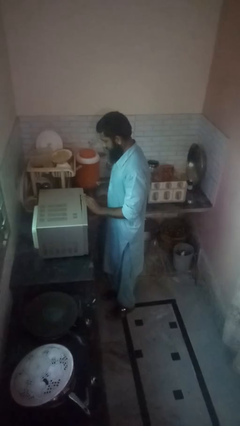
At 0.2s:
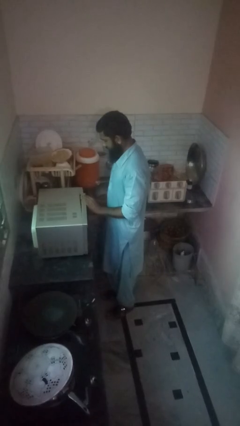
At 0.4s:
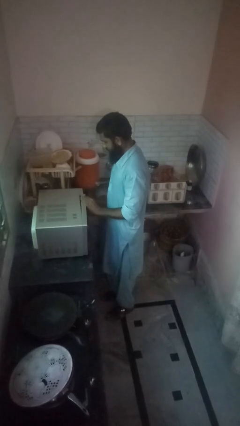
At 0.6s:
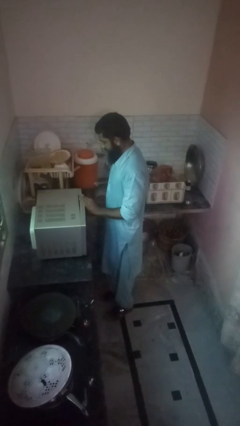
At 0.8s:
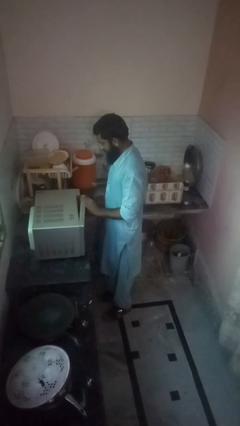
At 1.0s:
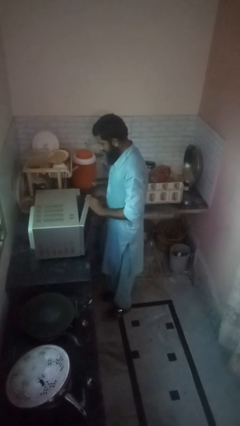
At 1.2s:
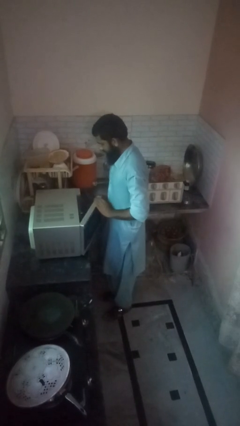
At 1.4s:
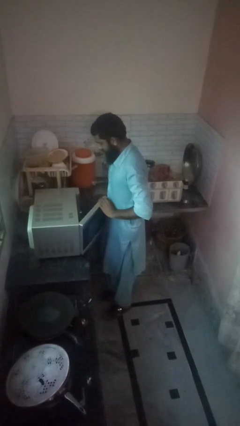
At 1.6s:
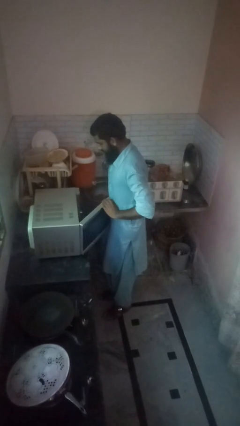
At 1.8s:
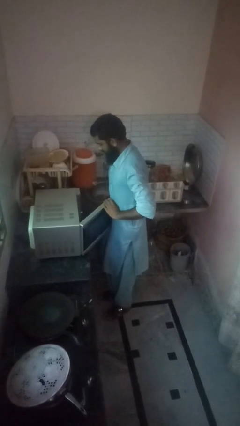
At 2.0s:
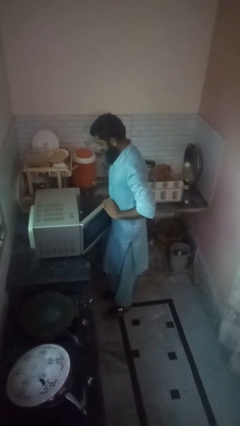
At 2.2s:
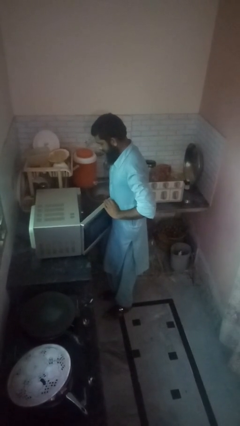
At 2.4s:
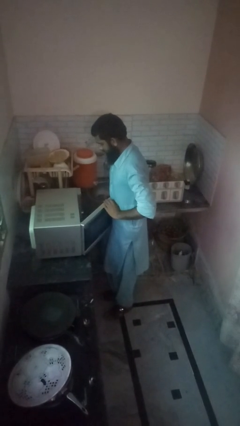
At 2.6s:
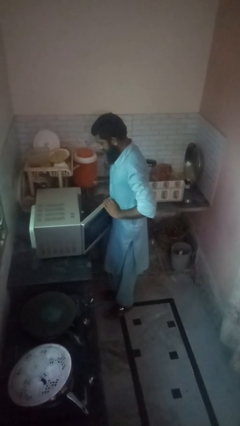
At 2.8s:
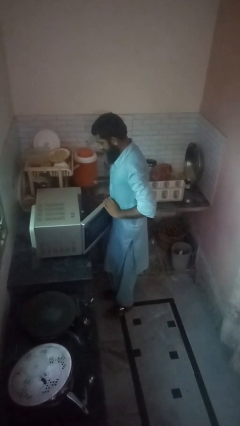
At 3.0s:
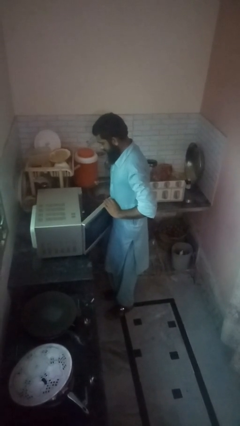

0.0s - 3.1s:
person opens oven door

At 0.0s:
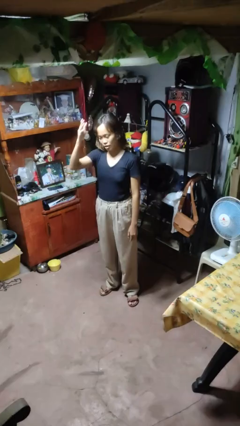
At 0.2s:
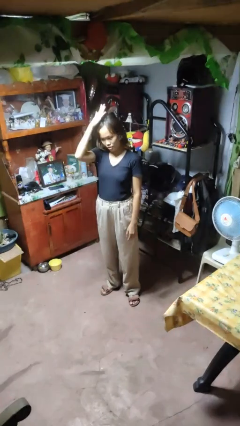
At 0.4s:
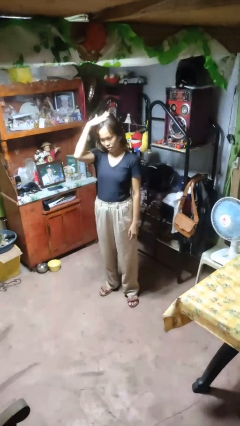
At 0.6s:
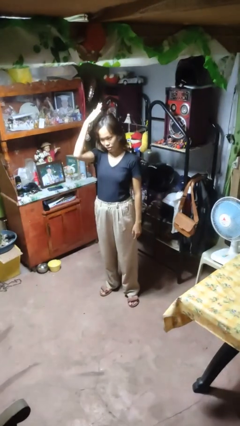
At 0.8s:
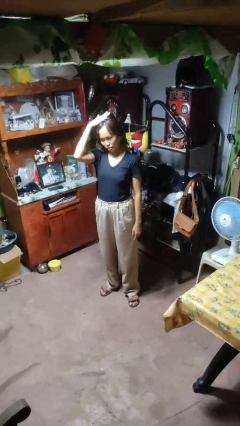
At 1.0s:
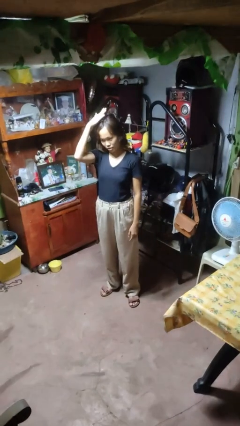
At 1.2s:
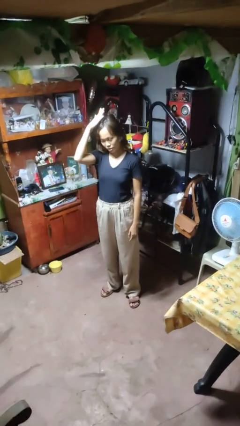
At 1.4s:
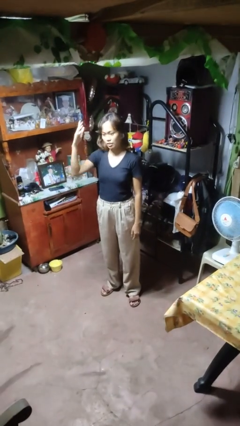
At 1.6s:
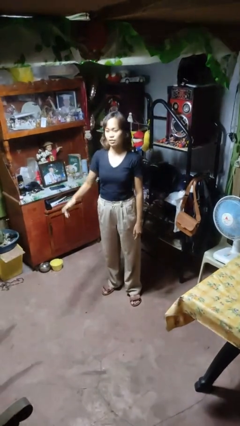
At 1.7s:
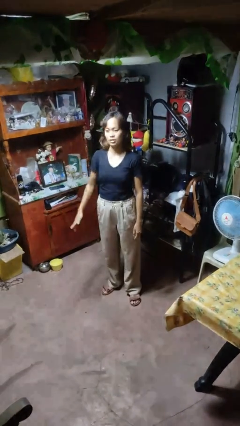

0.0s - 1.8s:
person pats head

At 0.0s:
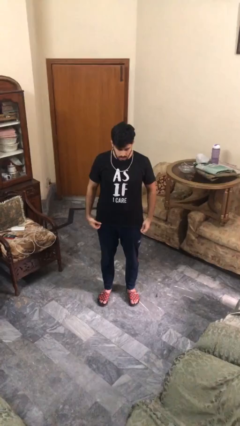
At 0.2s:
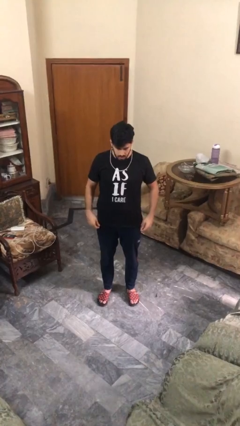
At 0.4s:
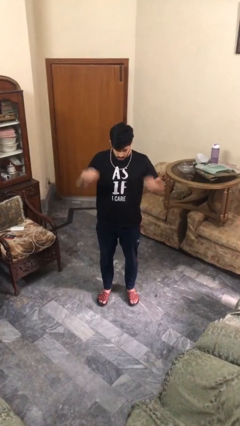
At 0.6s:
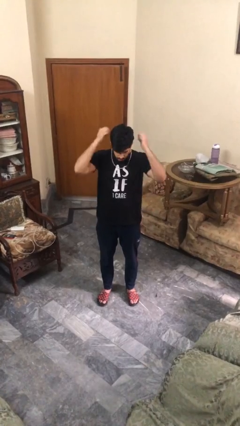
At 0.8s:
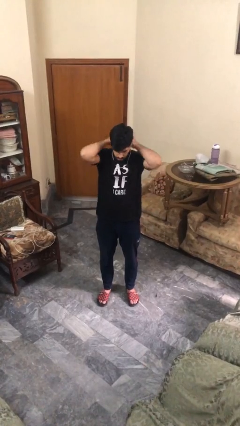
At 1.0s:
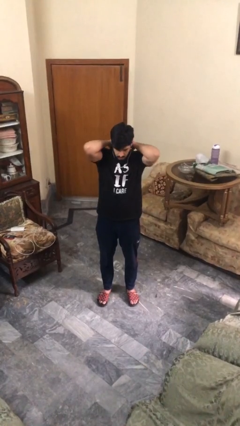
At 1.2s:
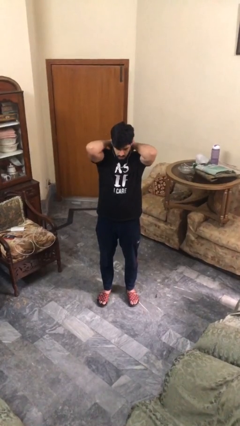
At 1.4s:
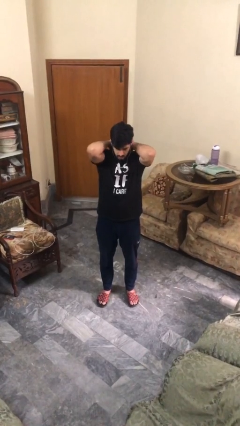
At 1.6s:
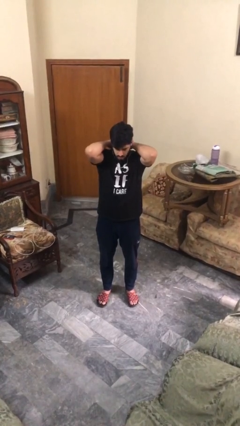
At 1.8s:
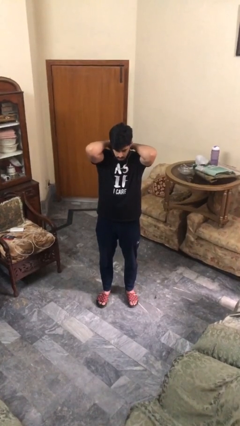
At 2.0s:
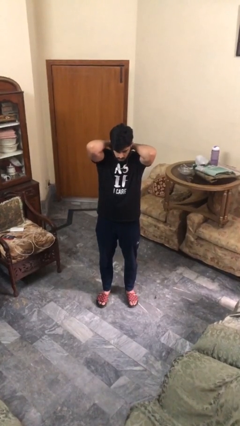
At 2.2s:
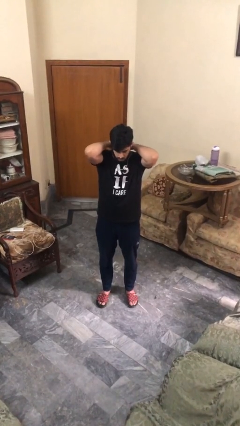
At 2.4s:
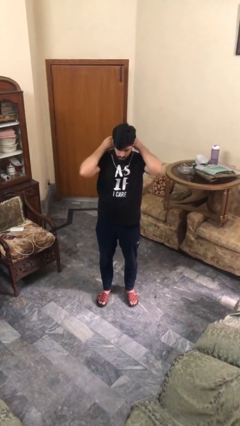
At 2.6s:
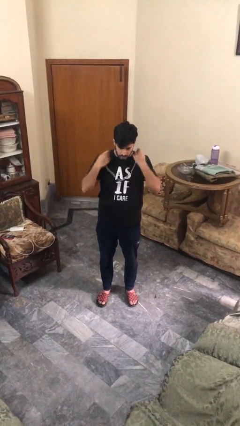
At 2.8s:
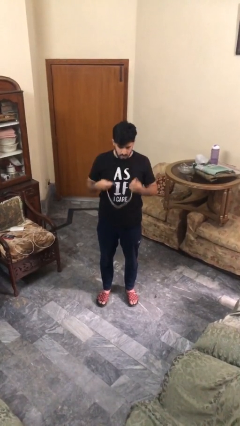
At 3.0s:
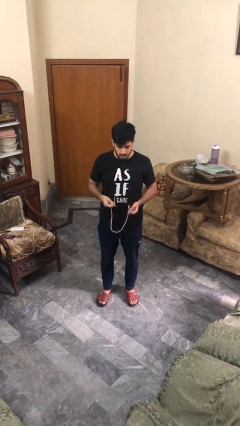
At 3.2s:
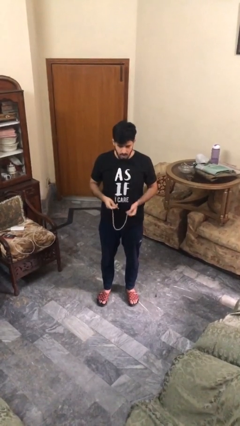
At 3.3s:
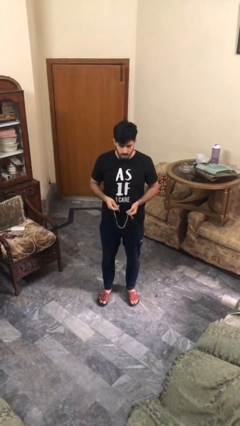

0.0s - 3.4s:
person takes off necklace

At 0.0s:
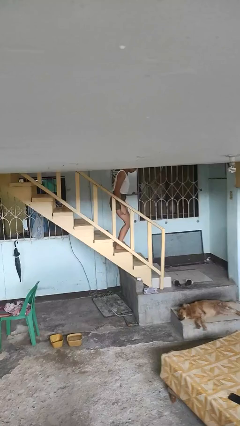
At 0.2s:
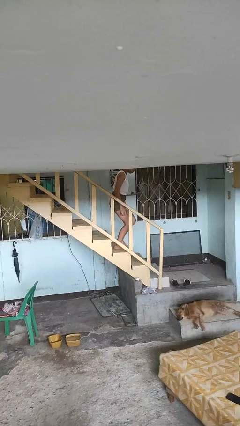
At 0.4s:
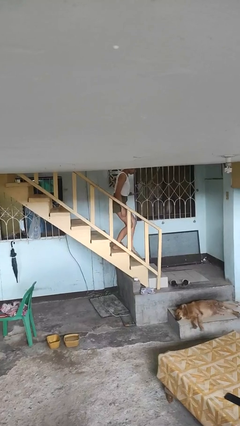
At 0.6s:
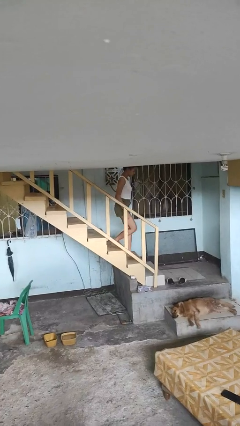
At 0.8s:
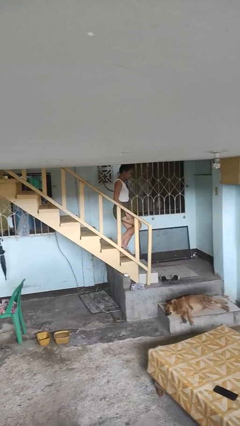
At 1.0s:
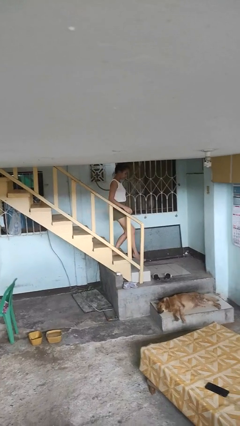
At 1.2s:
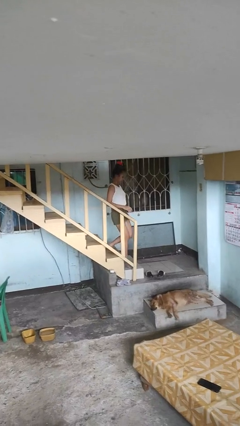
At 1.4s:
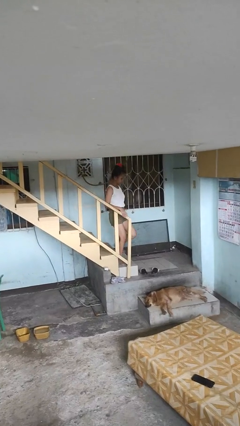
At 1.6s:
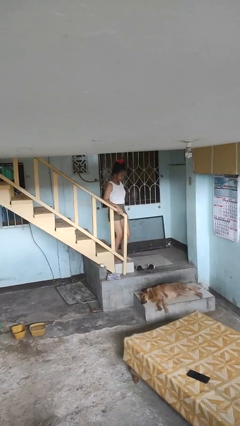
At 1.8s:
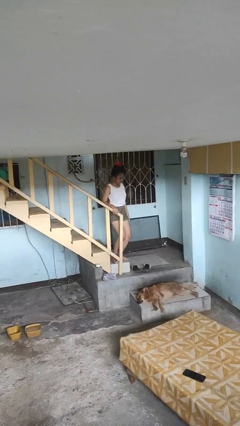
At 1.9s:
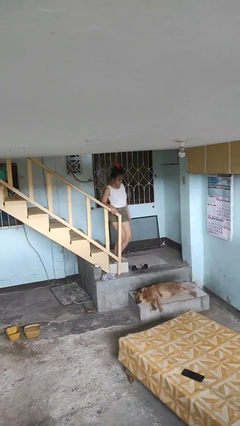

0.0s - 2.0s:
person climbs down stairs

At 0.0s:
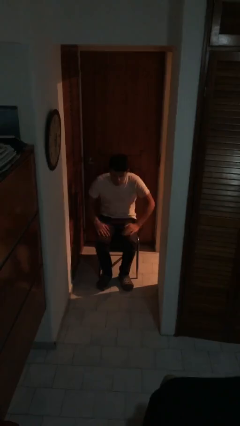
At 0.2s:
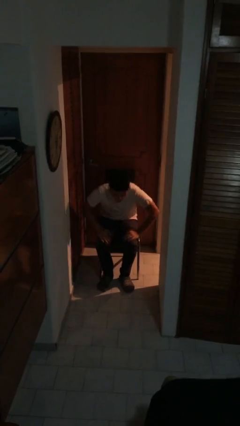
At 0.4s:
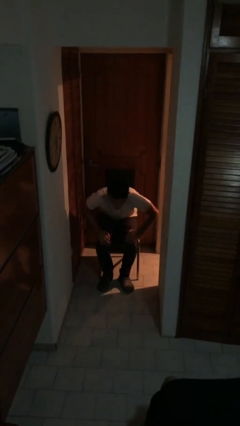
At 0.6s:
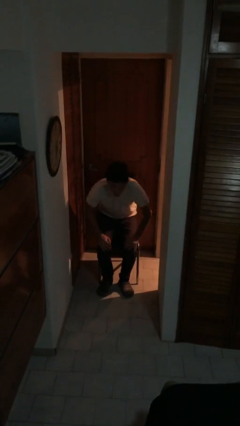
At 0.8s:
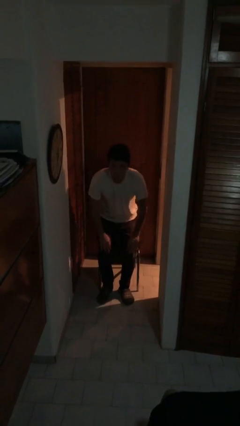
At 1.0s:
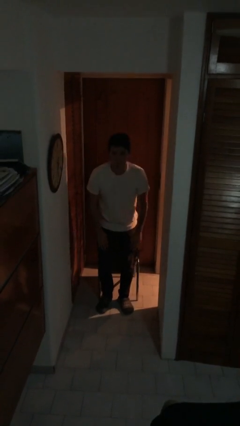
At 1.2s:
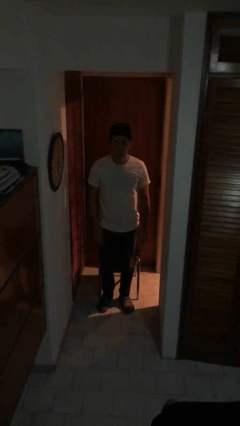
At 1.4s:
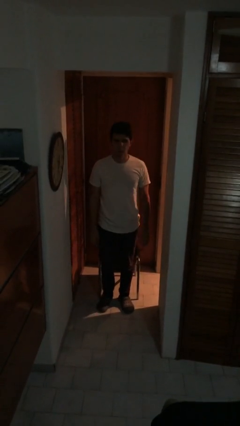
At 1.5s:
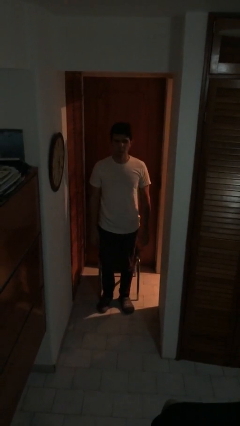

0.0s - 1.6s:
person stands up

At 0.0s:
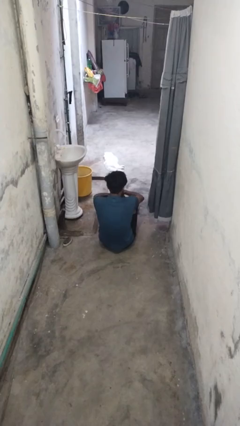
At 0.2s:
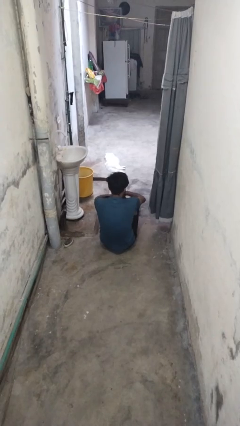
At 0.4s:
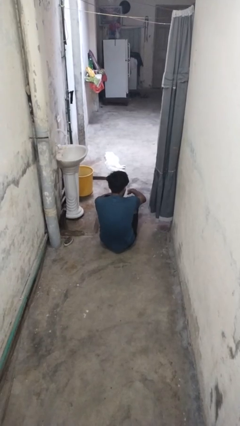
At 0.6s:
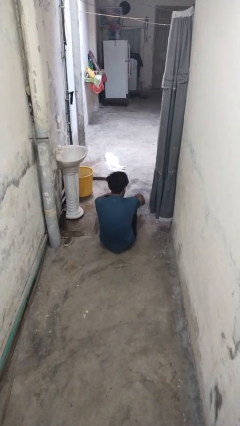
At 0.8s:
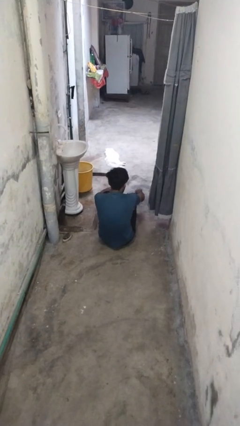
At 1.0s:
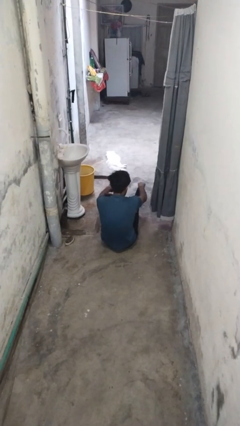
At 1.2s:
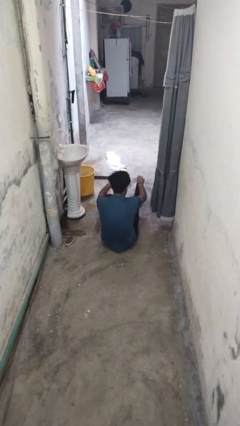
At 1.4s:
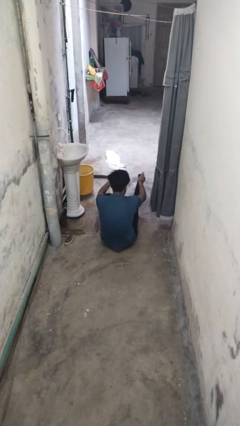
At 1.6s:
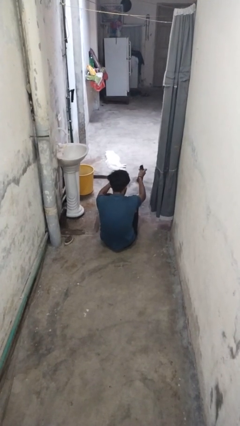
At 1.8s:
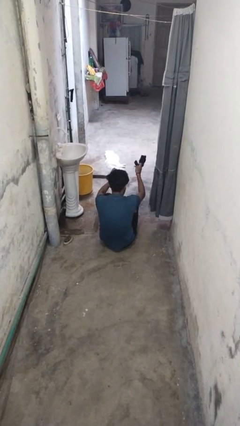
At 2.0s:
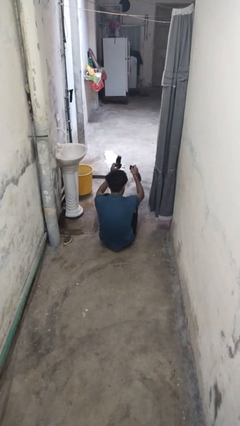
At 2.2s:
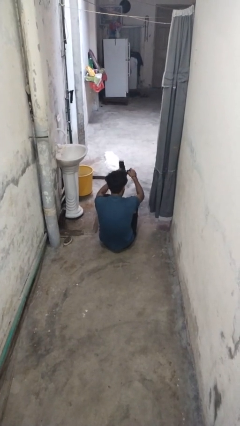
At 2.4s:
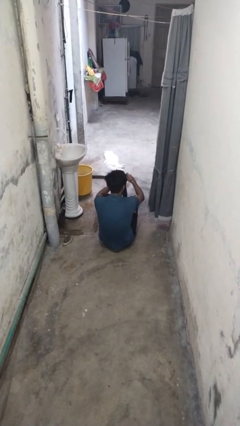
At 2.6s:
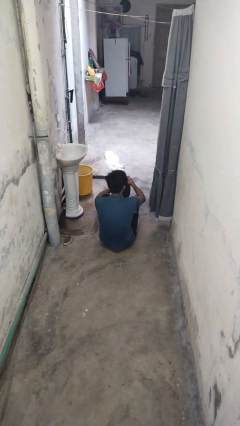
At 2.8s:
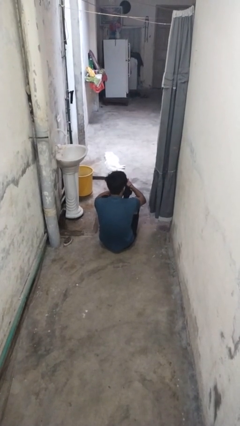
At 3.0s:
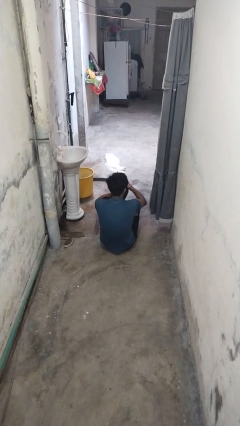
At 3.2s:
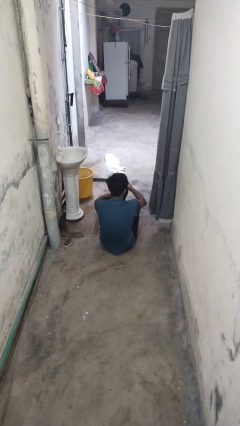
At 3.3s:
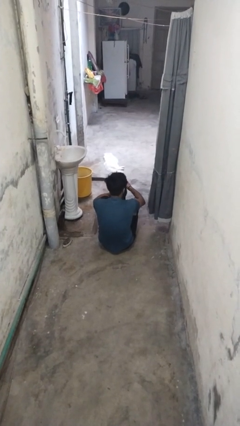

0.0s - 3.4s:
person takes off socks

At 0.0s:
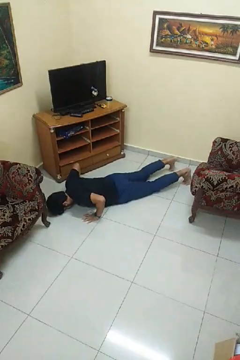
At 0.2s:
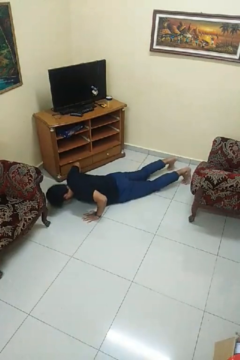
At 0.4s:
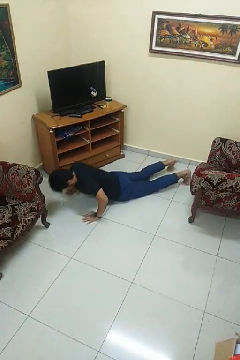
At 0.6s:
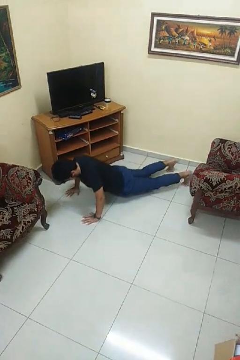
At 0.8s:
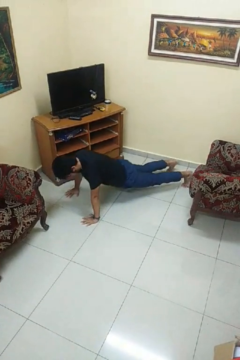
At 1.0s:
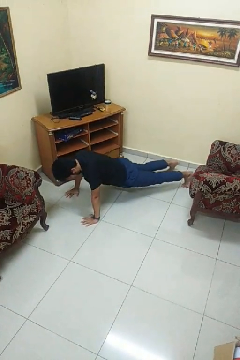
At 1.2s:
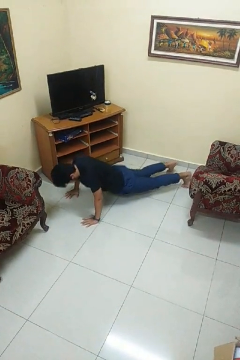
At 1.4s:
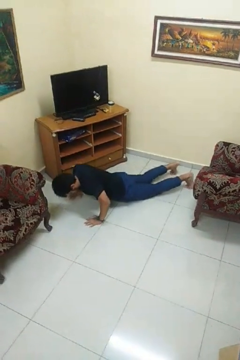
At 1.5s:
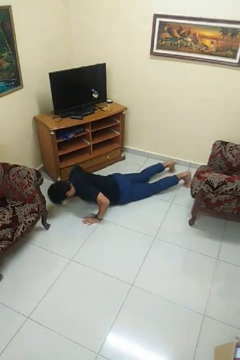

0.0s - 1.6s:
person exercises with pushup

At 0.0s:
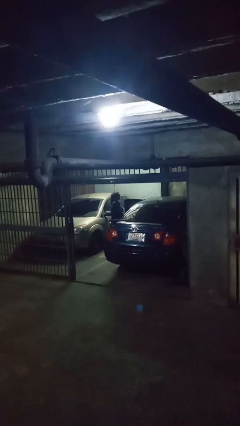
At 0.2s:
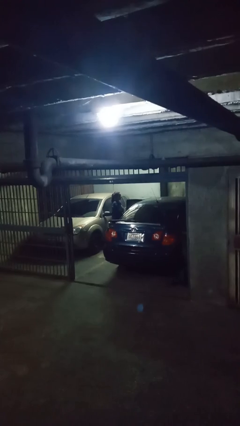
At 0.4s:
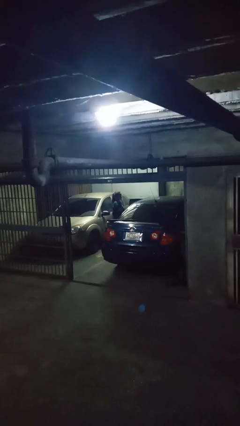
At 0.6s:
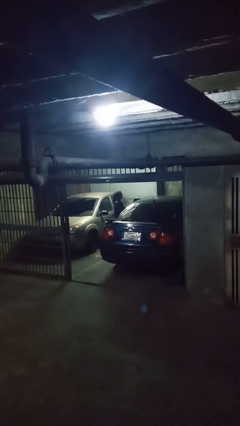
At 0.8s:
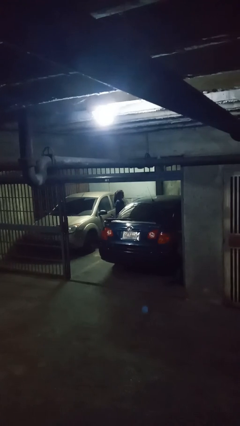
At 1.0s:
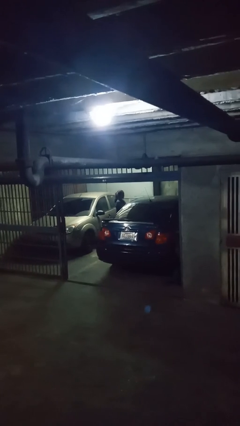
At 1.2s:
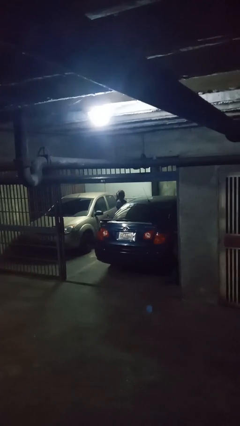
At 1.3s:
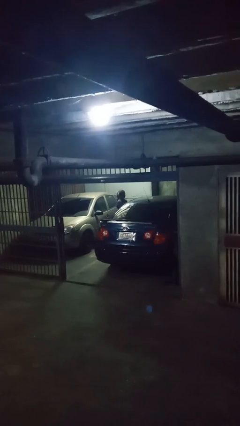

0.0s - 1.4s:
person closes car door
